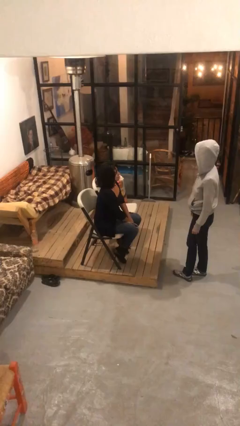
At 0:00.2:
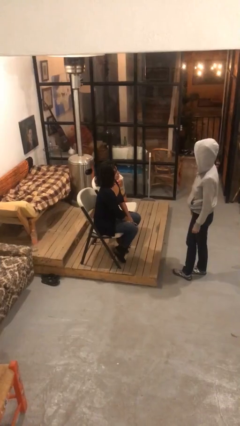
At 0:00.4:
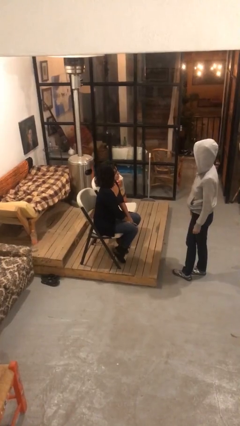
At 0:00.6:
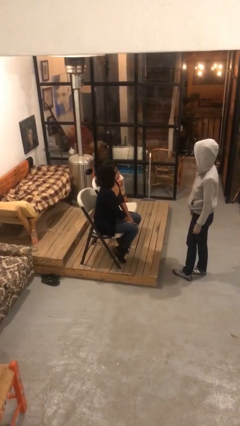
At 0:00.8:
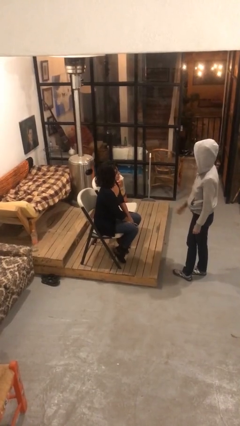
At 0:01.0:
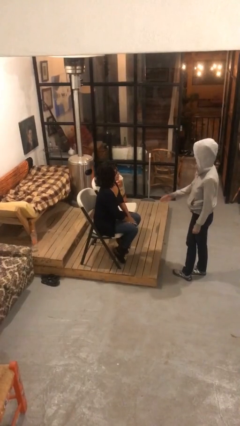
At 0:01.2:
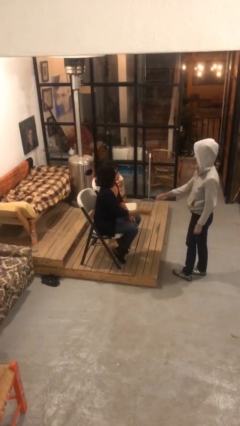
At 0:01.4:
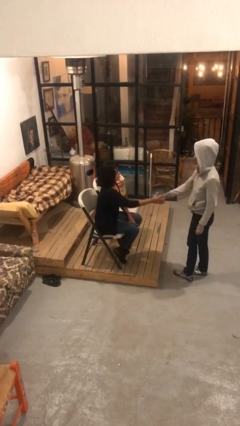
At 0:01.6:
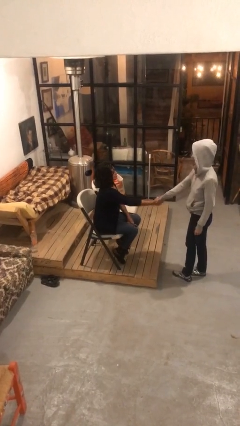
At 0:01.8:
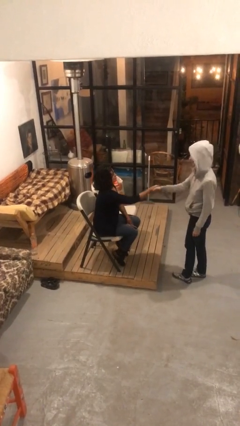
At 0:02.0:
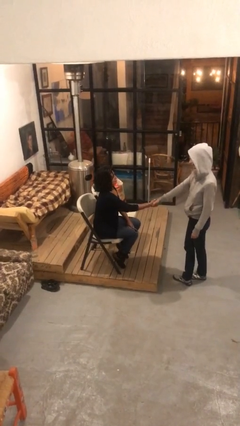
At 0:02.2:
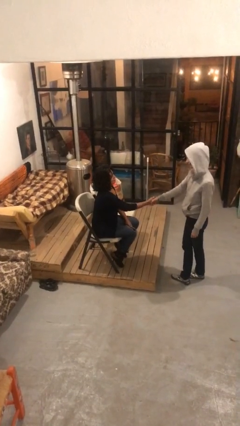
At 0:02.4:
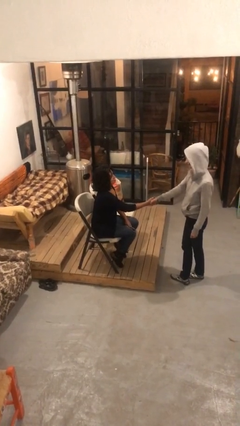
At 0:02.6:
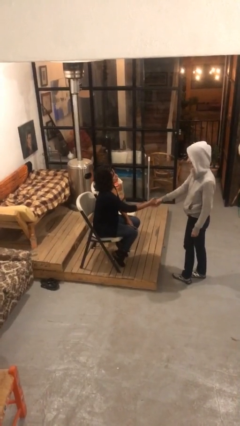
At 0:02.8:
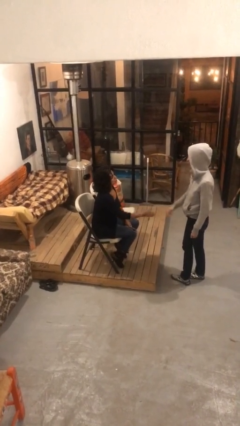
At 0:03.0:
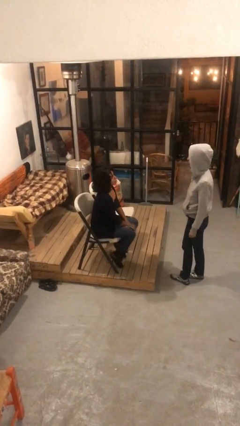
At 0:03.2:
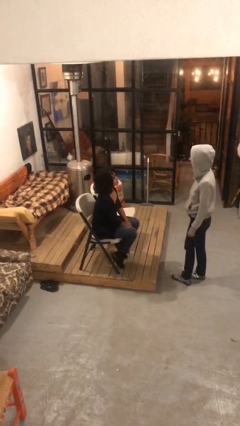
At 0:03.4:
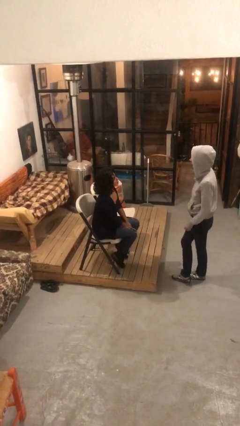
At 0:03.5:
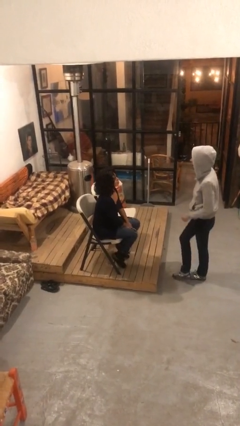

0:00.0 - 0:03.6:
person shakes hand

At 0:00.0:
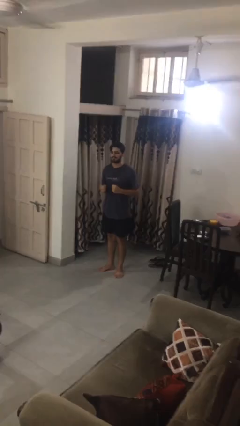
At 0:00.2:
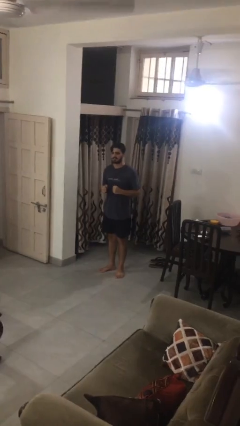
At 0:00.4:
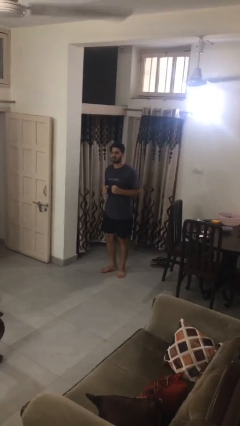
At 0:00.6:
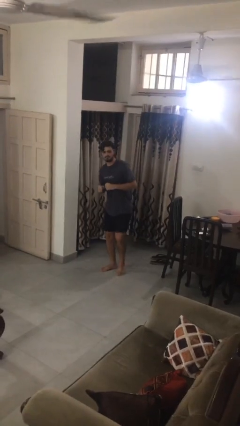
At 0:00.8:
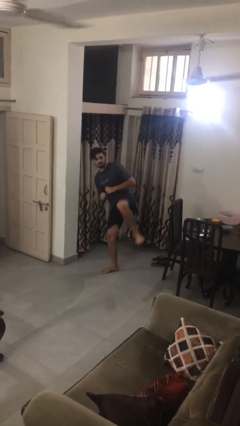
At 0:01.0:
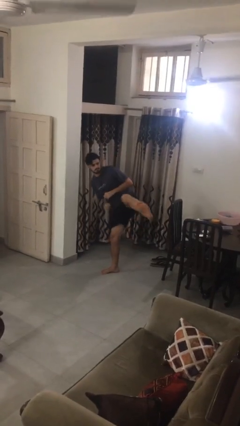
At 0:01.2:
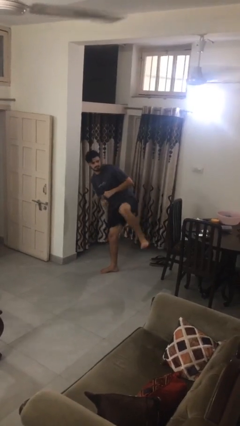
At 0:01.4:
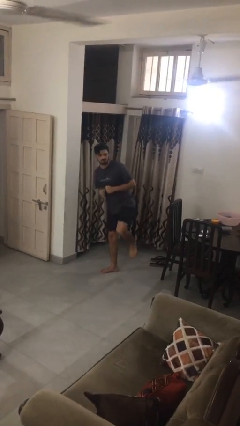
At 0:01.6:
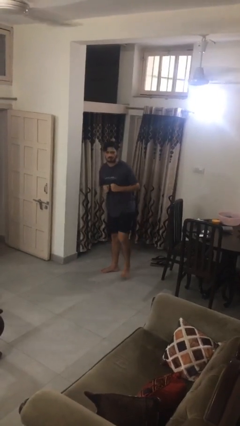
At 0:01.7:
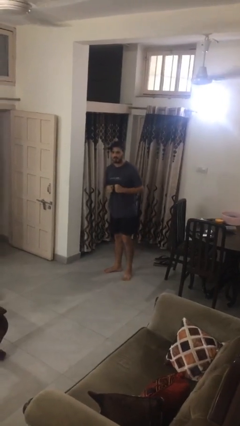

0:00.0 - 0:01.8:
person karate kicks

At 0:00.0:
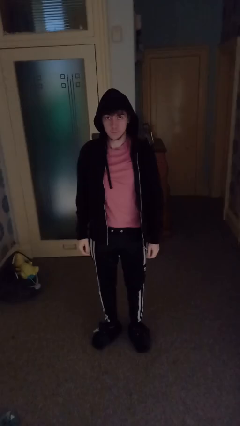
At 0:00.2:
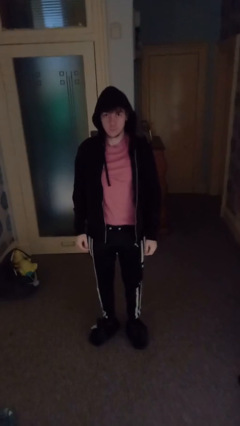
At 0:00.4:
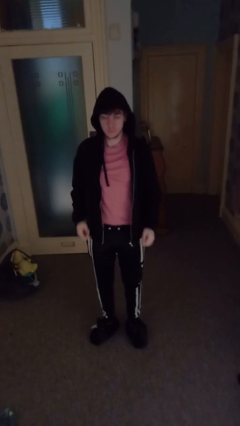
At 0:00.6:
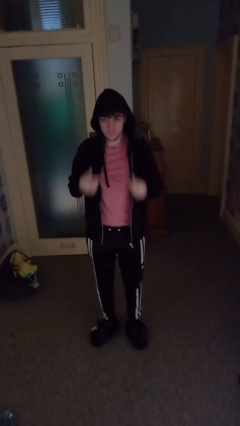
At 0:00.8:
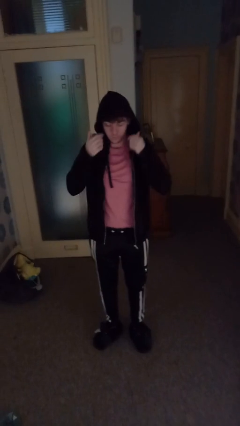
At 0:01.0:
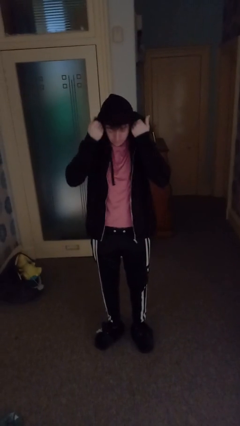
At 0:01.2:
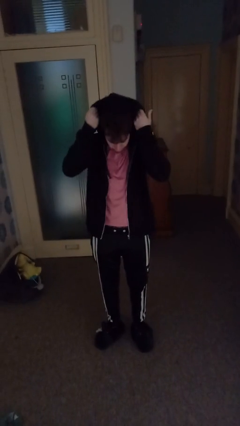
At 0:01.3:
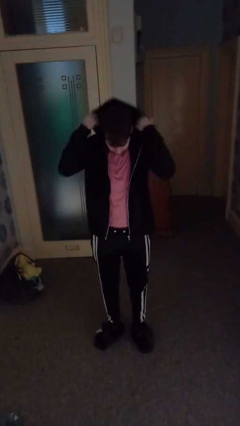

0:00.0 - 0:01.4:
person takes off hoodie

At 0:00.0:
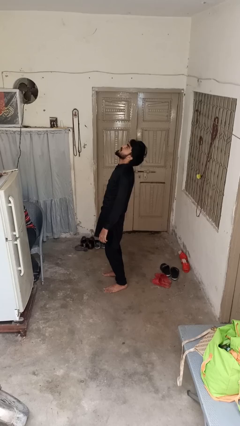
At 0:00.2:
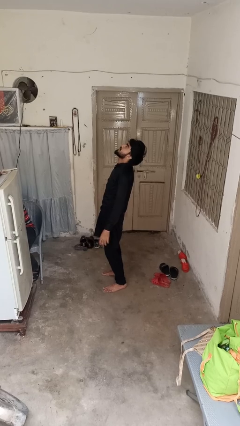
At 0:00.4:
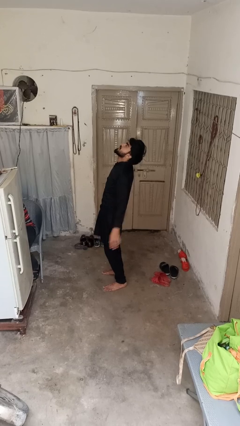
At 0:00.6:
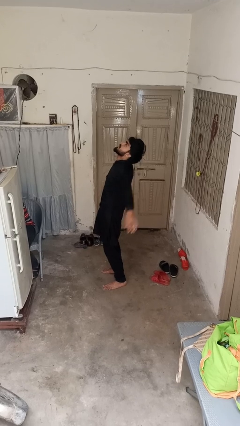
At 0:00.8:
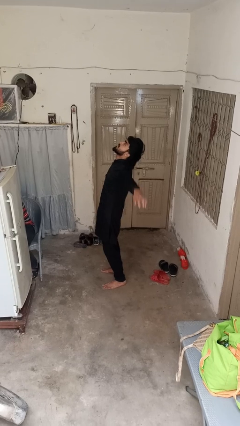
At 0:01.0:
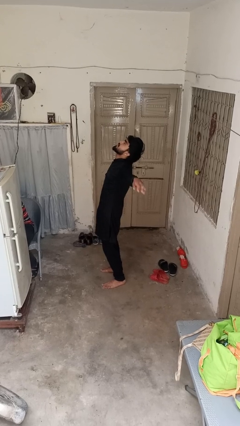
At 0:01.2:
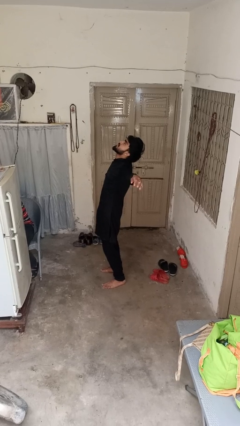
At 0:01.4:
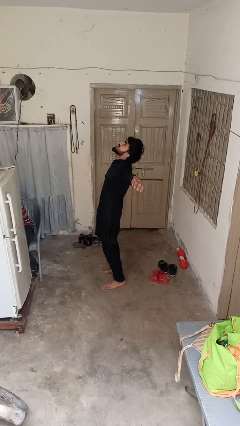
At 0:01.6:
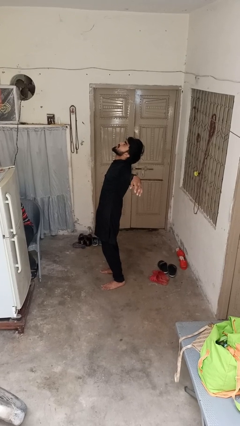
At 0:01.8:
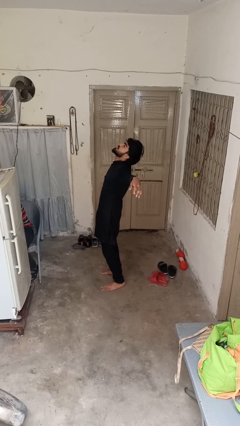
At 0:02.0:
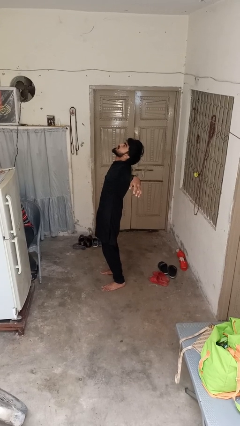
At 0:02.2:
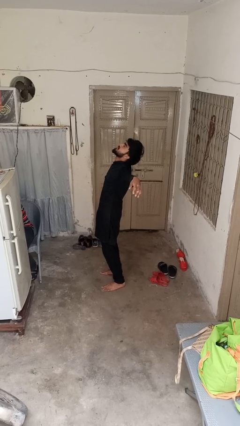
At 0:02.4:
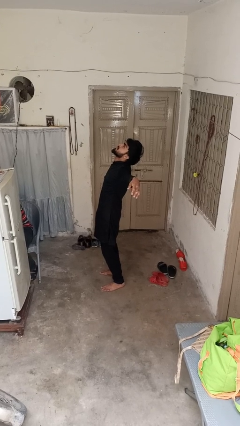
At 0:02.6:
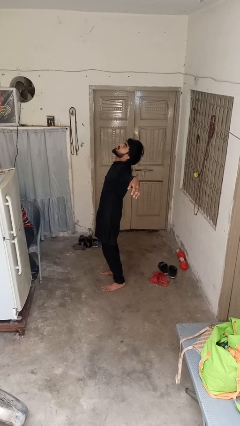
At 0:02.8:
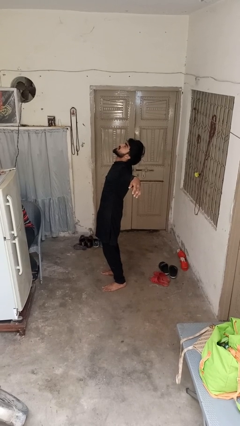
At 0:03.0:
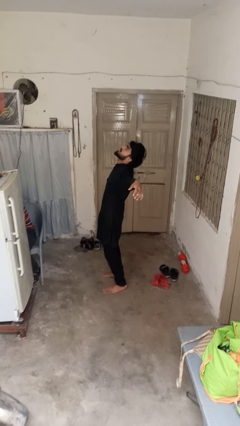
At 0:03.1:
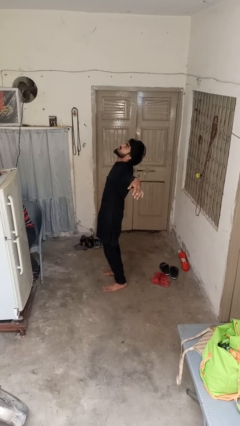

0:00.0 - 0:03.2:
person stretches arms to side

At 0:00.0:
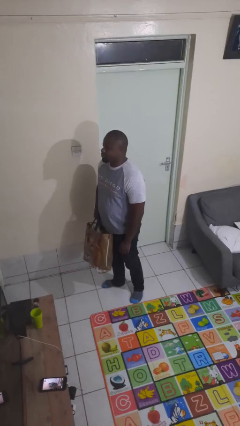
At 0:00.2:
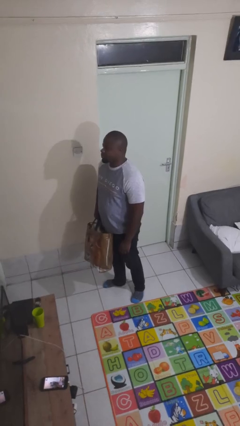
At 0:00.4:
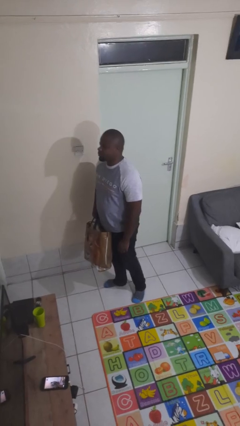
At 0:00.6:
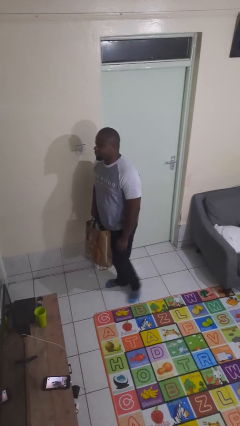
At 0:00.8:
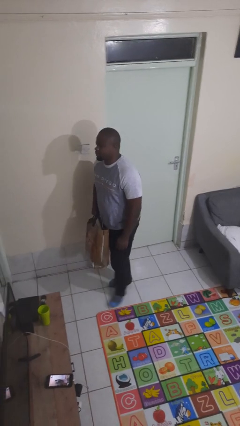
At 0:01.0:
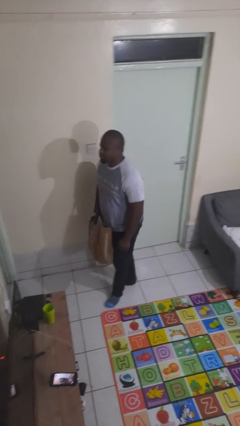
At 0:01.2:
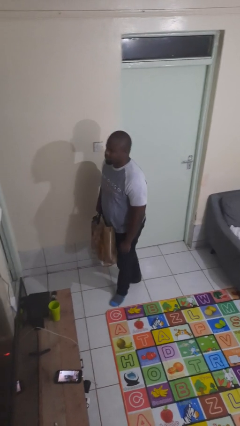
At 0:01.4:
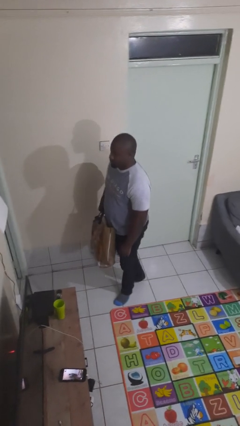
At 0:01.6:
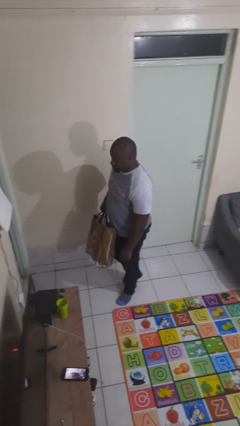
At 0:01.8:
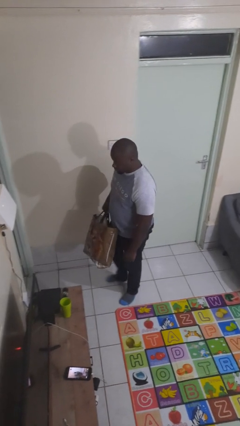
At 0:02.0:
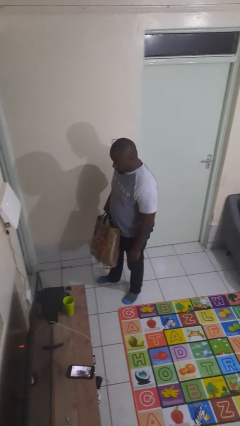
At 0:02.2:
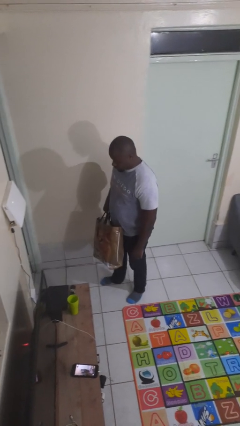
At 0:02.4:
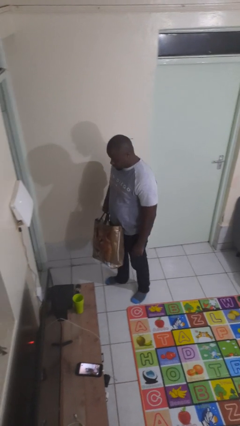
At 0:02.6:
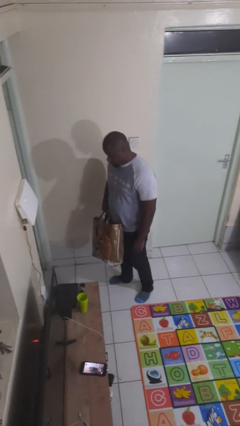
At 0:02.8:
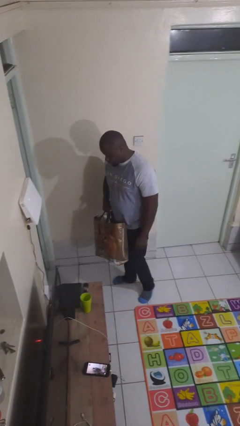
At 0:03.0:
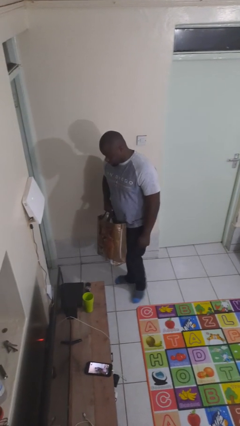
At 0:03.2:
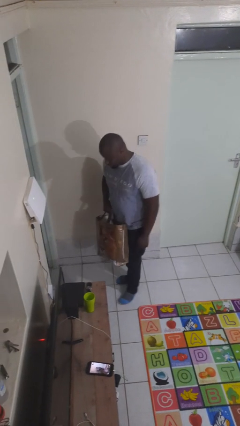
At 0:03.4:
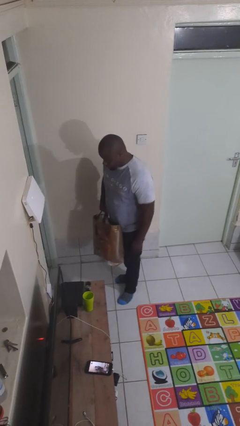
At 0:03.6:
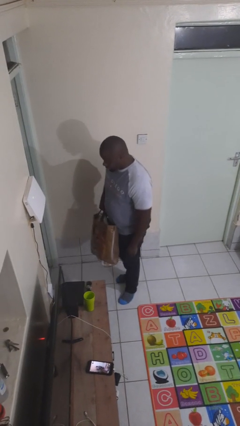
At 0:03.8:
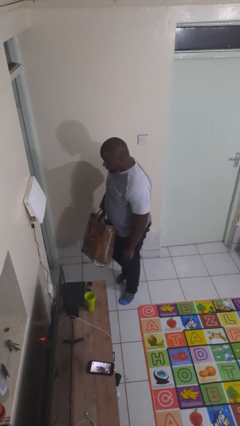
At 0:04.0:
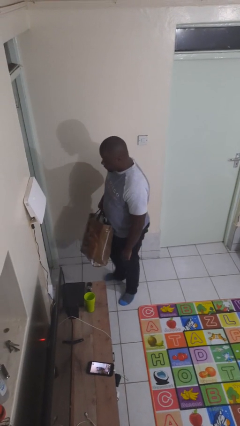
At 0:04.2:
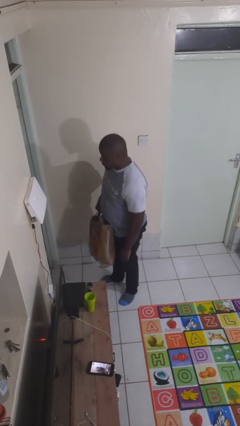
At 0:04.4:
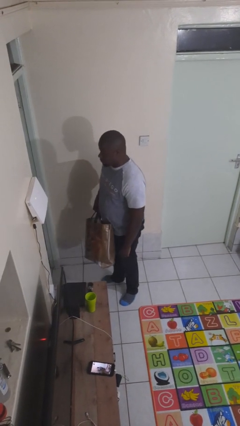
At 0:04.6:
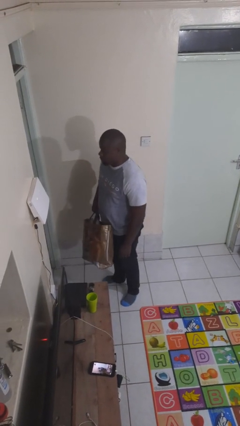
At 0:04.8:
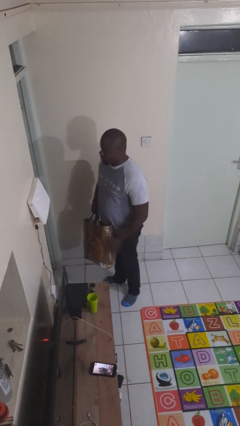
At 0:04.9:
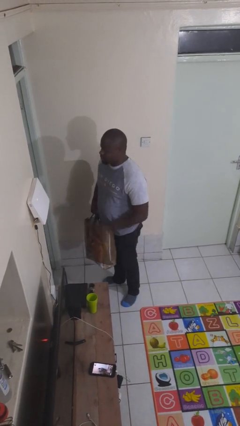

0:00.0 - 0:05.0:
person carries groceries

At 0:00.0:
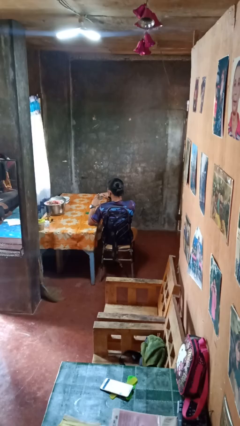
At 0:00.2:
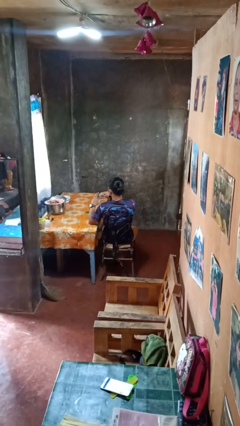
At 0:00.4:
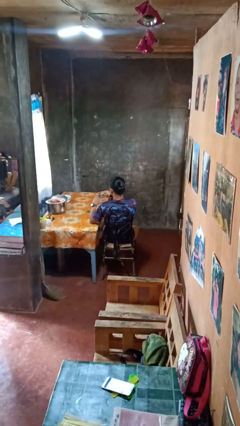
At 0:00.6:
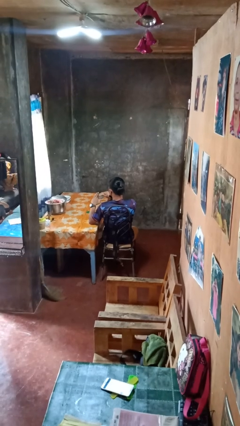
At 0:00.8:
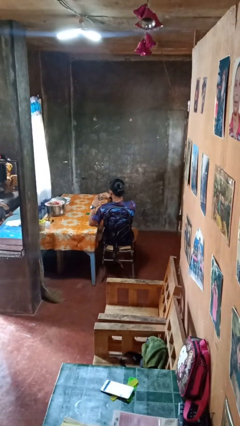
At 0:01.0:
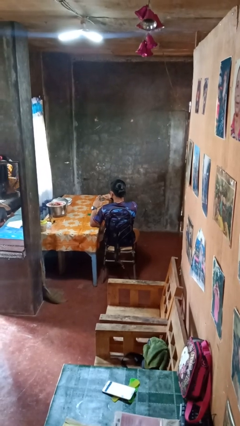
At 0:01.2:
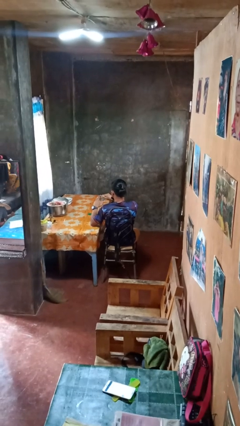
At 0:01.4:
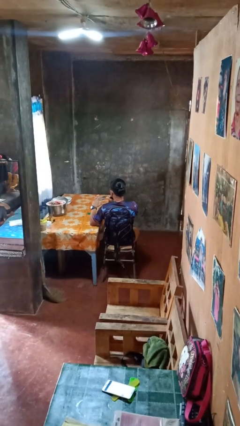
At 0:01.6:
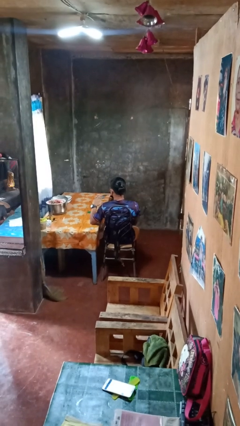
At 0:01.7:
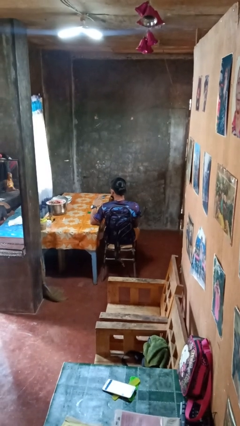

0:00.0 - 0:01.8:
person files fingernails

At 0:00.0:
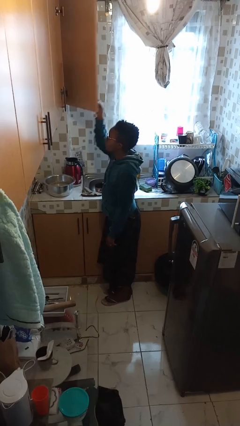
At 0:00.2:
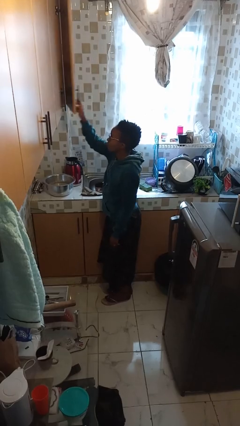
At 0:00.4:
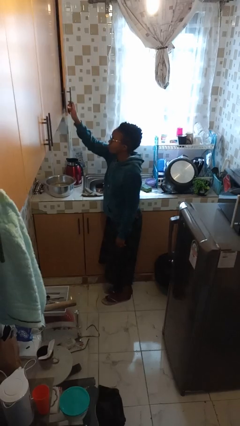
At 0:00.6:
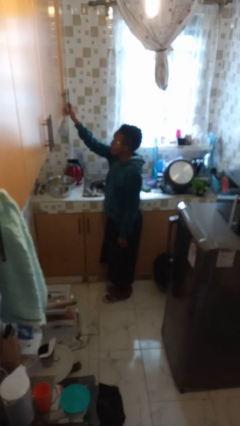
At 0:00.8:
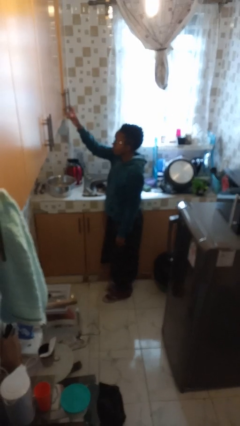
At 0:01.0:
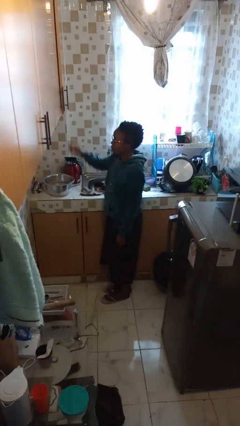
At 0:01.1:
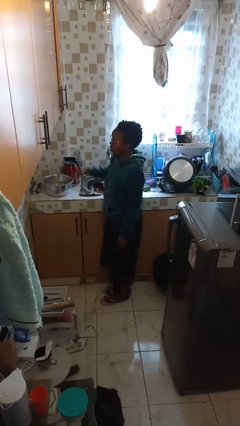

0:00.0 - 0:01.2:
person closes cabinet
